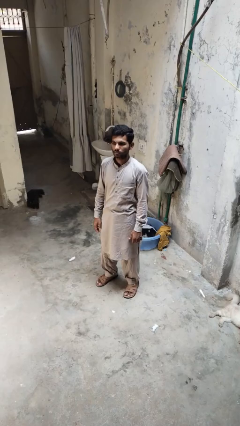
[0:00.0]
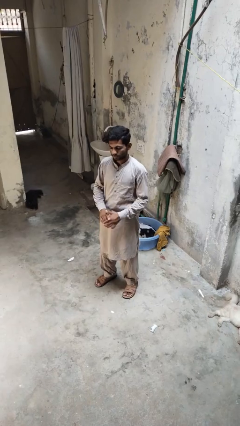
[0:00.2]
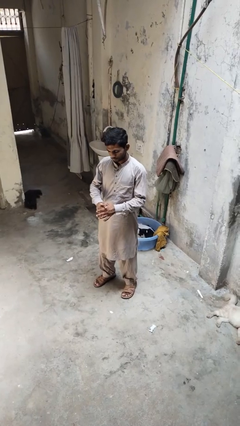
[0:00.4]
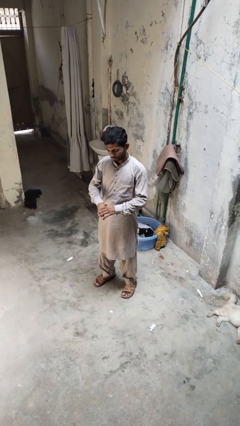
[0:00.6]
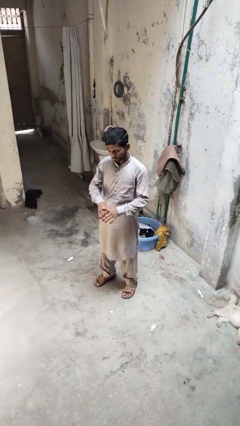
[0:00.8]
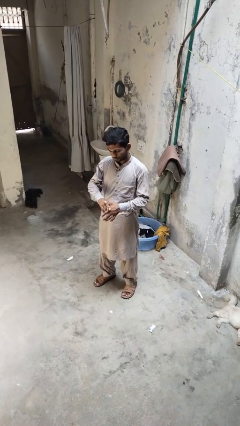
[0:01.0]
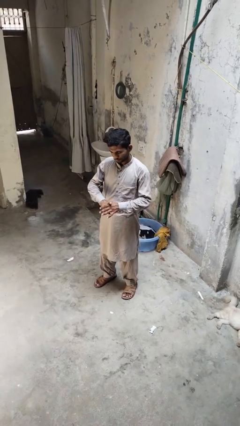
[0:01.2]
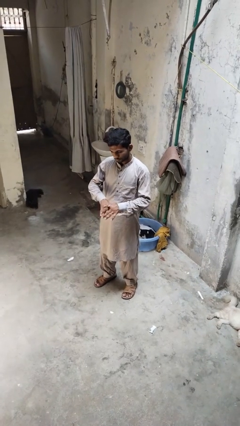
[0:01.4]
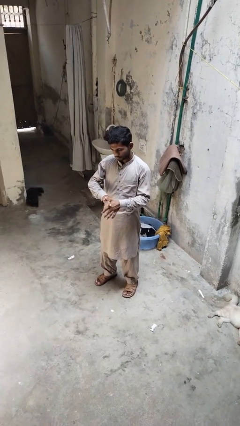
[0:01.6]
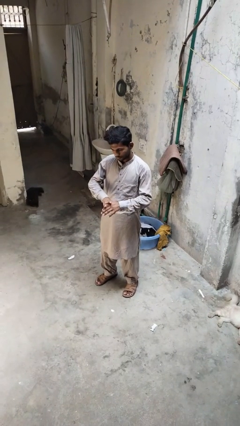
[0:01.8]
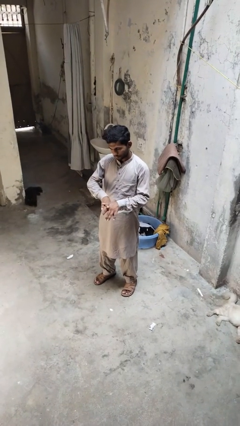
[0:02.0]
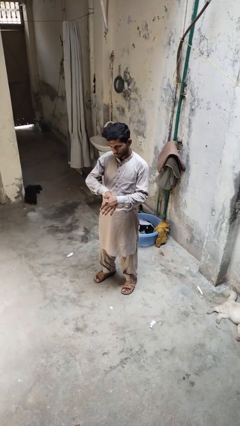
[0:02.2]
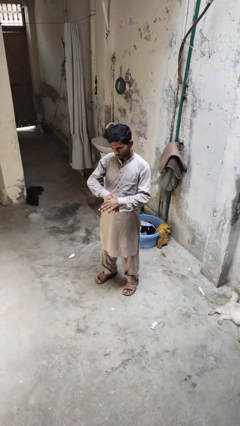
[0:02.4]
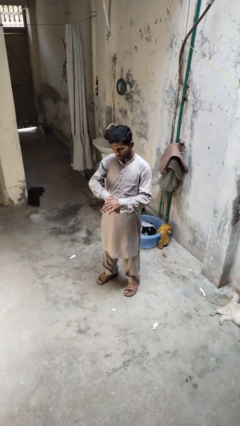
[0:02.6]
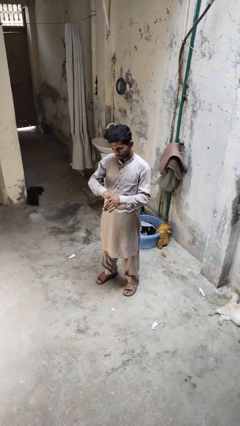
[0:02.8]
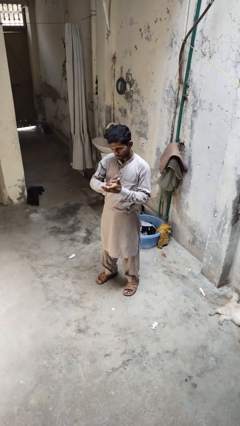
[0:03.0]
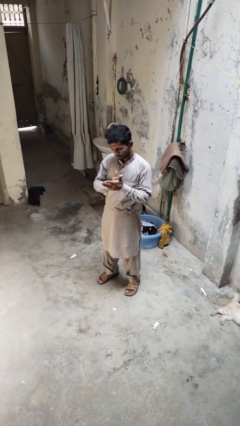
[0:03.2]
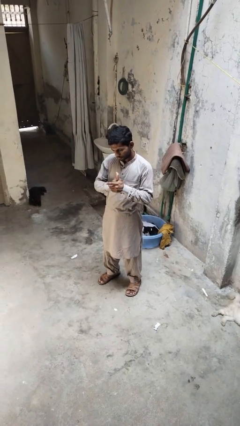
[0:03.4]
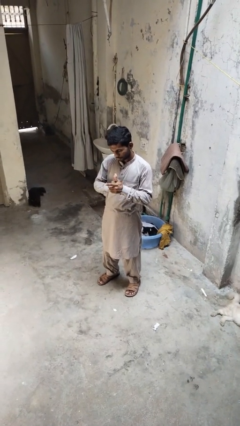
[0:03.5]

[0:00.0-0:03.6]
person cracks knuckles

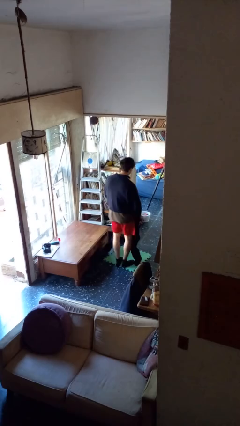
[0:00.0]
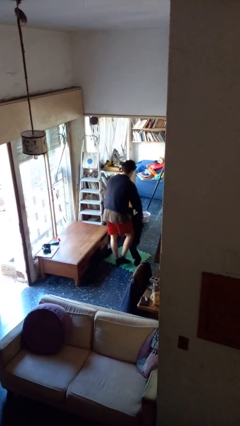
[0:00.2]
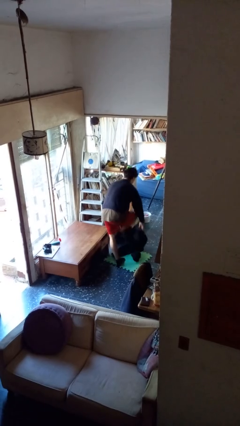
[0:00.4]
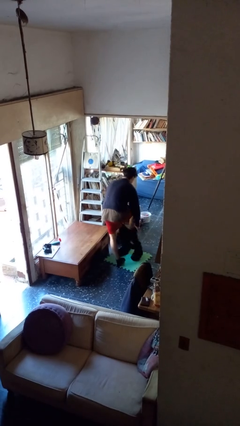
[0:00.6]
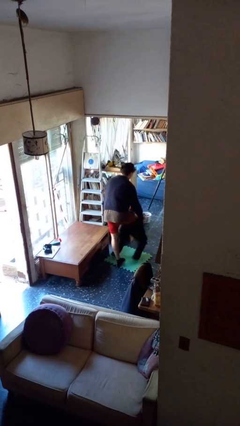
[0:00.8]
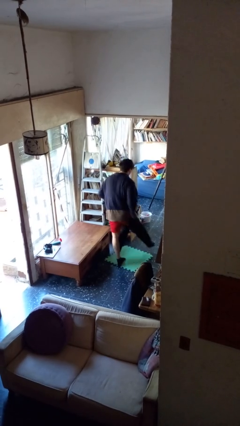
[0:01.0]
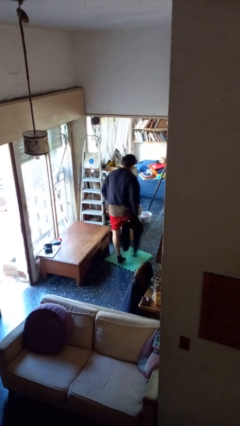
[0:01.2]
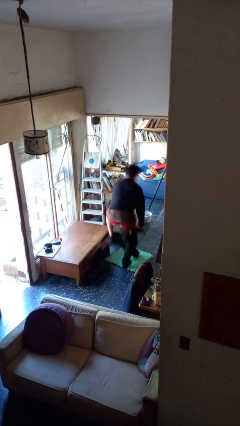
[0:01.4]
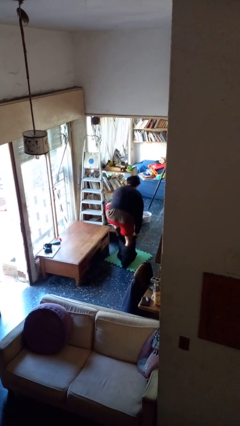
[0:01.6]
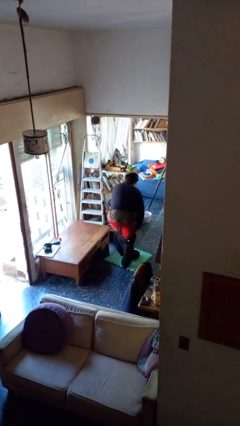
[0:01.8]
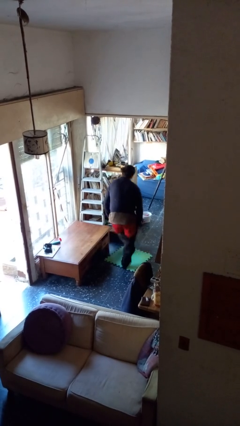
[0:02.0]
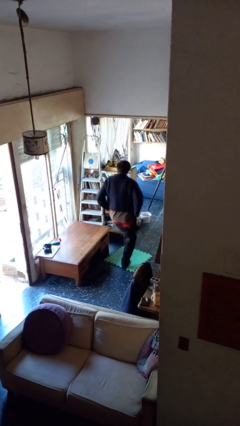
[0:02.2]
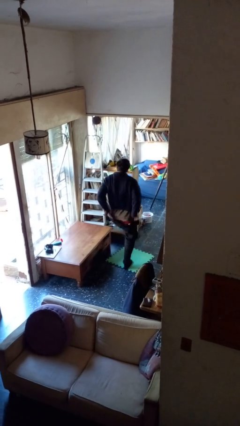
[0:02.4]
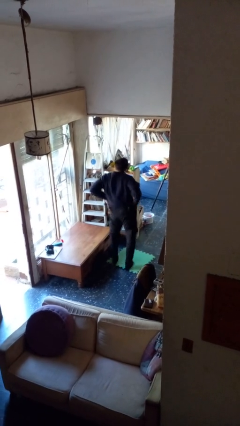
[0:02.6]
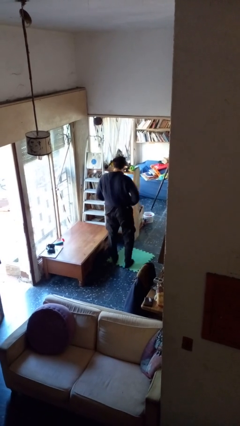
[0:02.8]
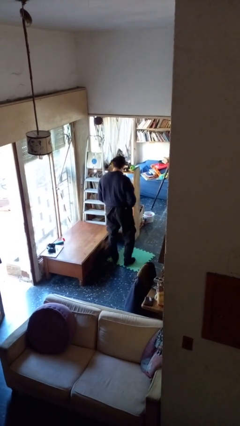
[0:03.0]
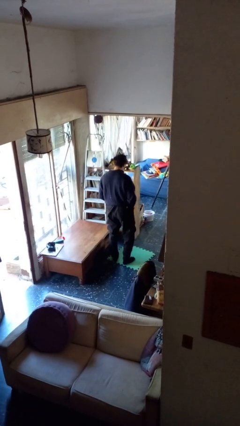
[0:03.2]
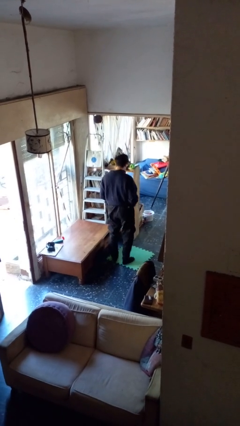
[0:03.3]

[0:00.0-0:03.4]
person puts on pants

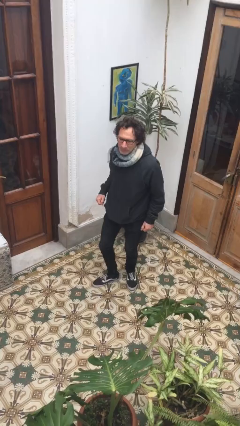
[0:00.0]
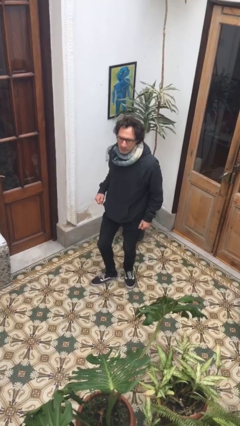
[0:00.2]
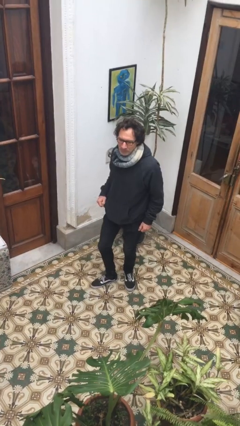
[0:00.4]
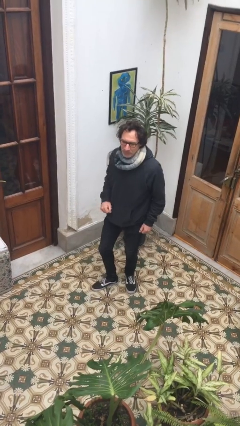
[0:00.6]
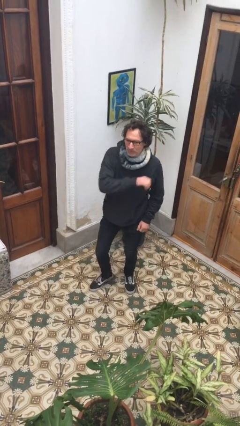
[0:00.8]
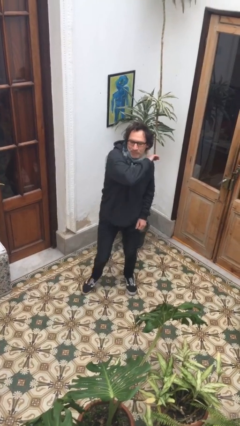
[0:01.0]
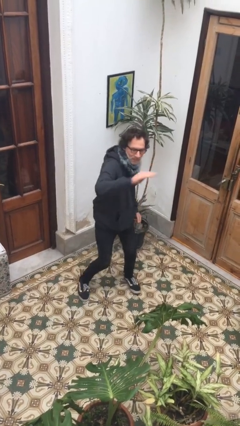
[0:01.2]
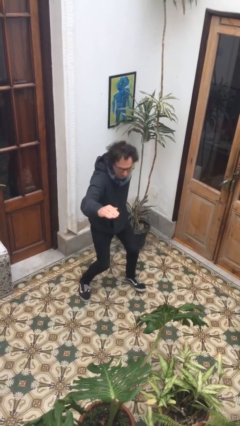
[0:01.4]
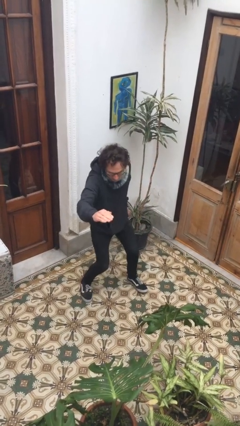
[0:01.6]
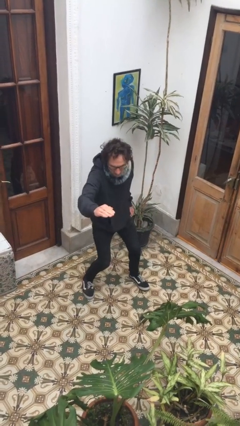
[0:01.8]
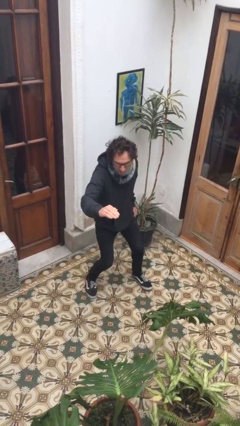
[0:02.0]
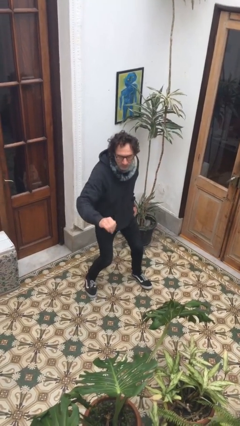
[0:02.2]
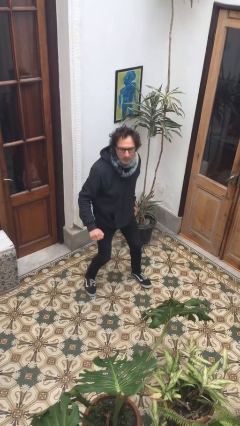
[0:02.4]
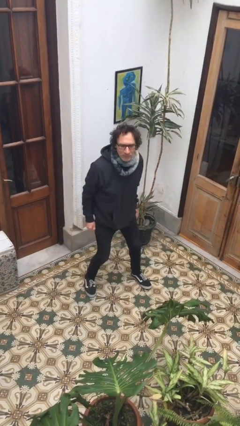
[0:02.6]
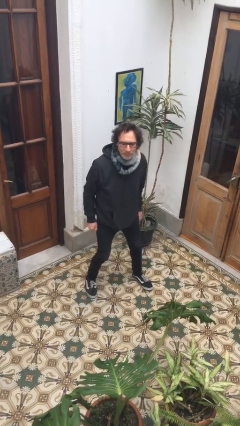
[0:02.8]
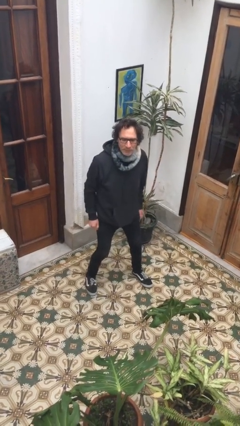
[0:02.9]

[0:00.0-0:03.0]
person karate chop

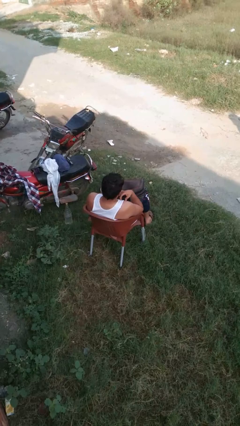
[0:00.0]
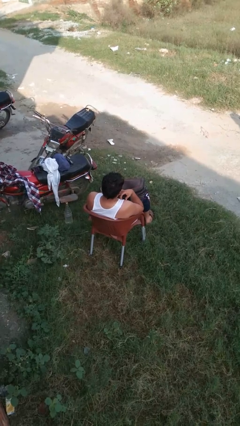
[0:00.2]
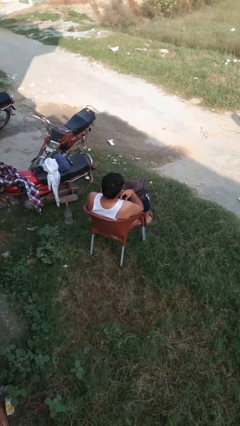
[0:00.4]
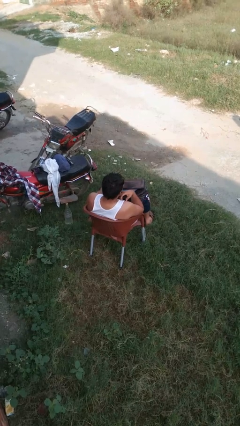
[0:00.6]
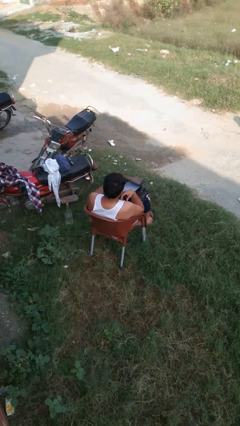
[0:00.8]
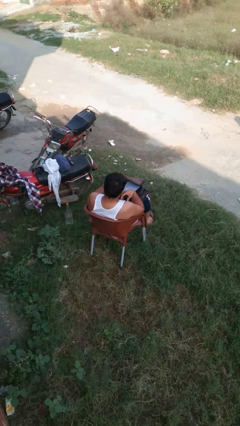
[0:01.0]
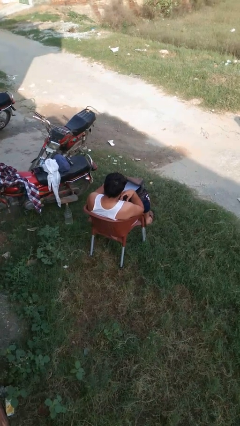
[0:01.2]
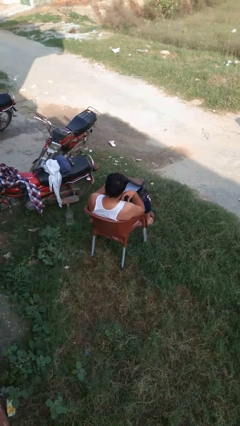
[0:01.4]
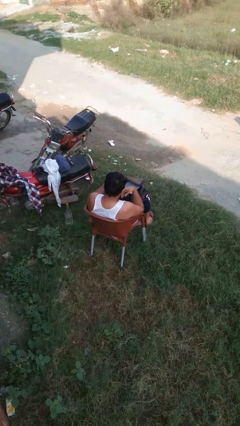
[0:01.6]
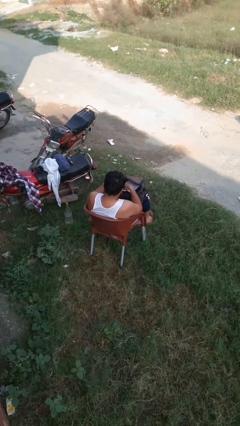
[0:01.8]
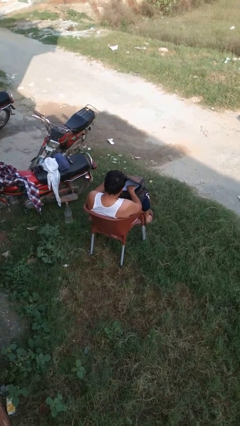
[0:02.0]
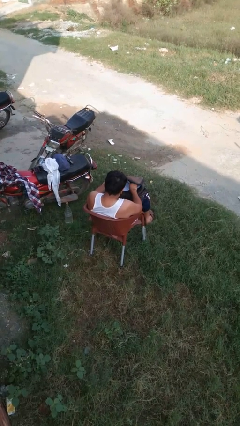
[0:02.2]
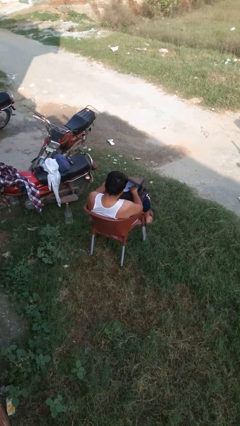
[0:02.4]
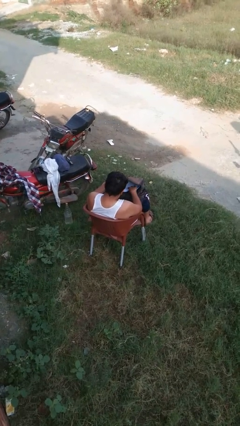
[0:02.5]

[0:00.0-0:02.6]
person searches in backpack

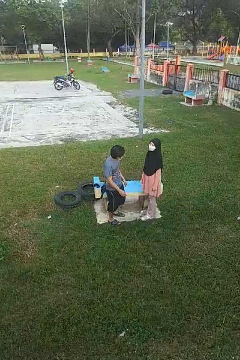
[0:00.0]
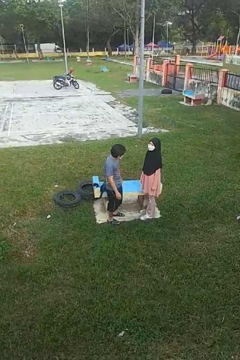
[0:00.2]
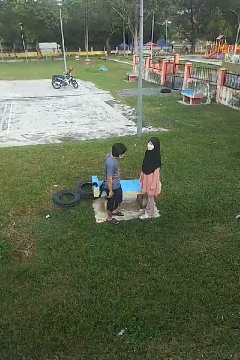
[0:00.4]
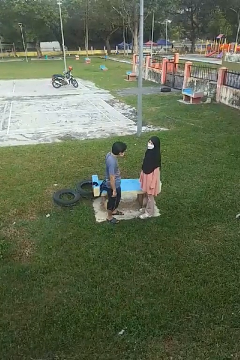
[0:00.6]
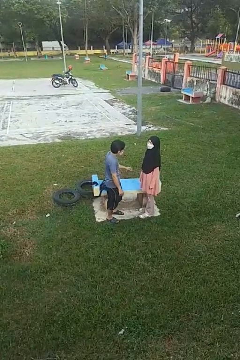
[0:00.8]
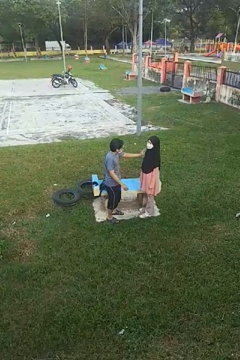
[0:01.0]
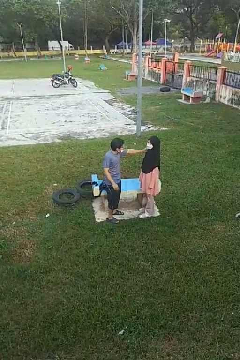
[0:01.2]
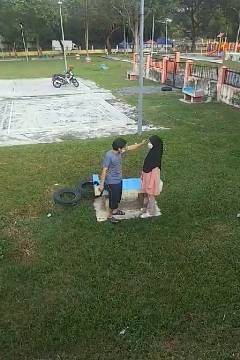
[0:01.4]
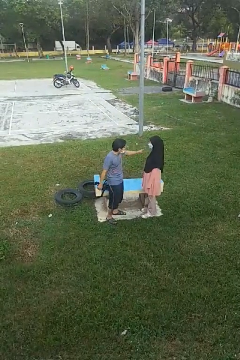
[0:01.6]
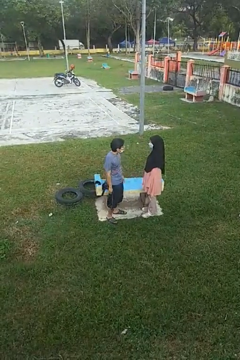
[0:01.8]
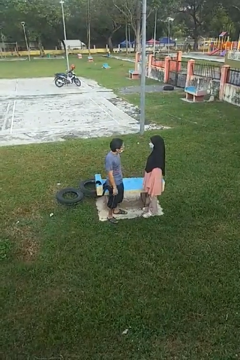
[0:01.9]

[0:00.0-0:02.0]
person shoves person

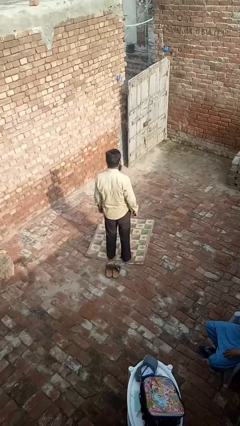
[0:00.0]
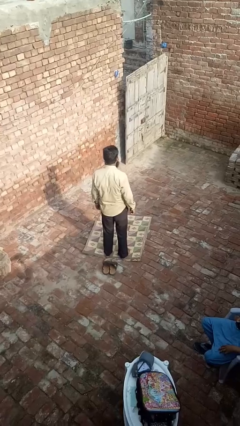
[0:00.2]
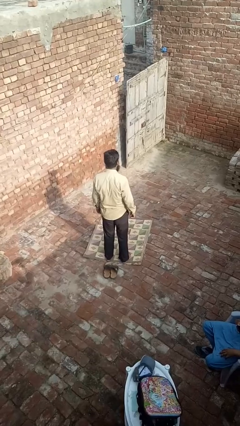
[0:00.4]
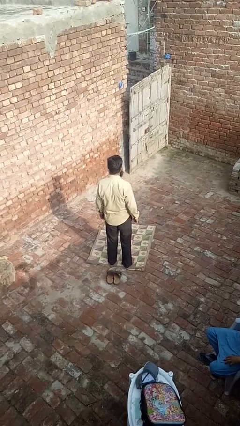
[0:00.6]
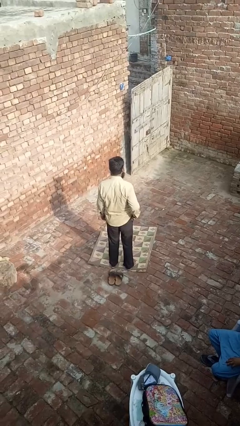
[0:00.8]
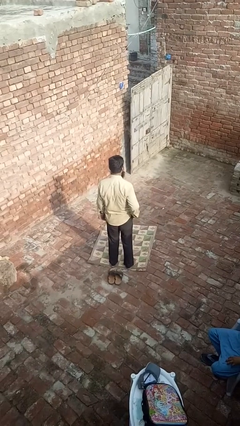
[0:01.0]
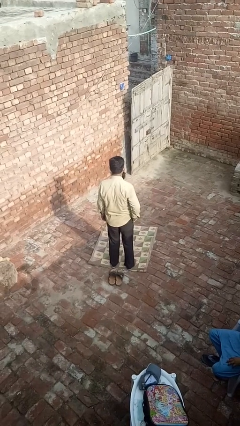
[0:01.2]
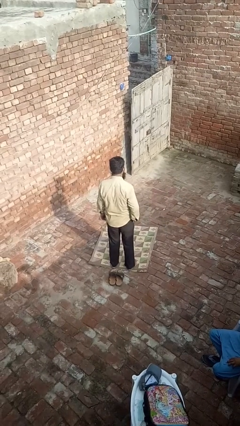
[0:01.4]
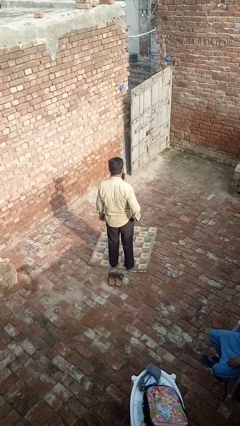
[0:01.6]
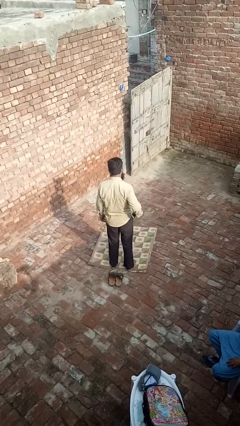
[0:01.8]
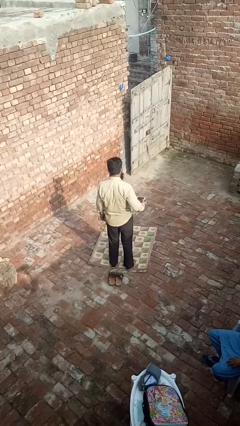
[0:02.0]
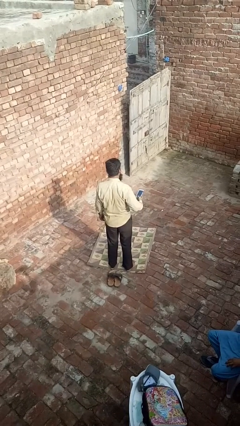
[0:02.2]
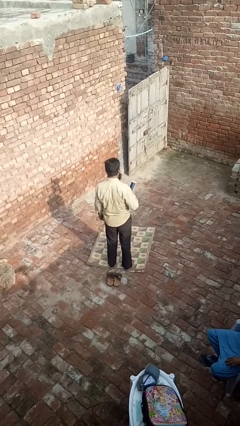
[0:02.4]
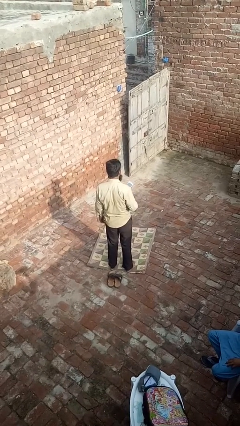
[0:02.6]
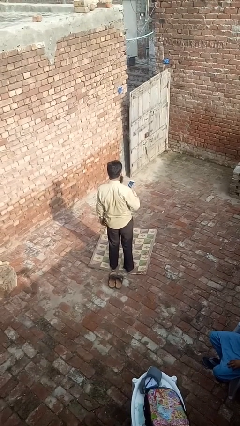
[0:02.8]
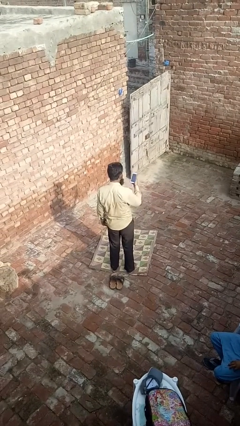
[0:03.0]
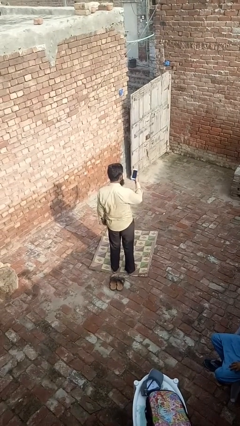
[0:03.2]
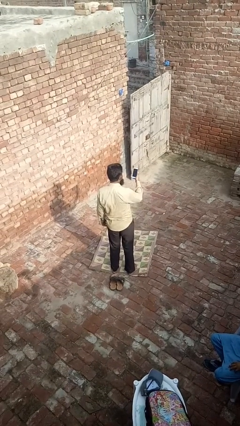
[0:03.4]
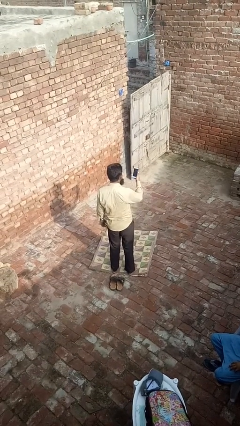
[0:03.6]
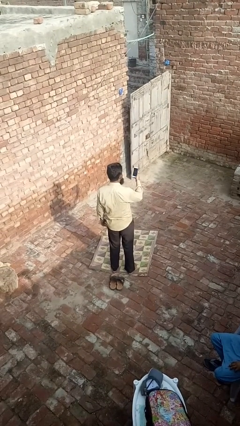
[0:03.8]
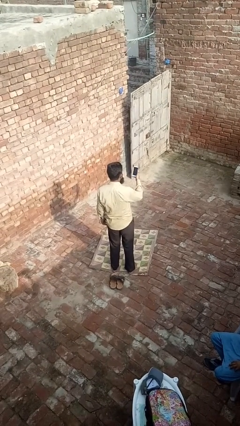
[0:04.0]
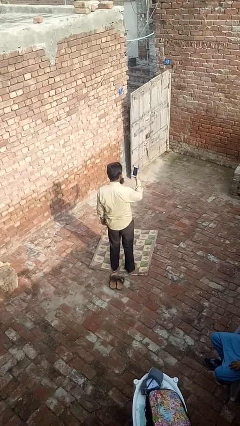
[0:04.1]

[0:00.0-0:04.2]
person takes phone from pocket
